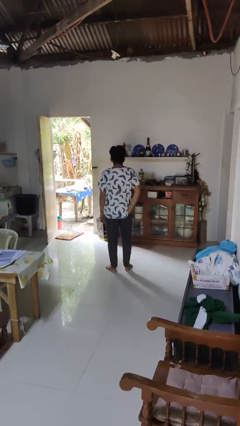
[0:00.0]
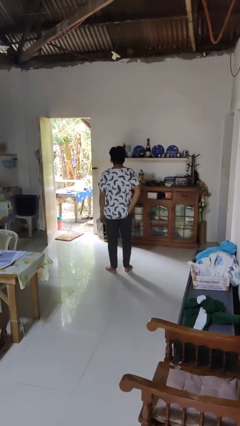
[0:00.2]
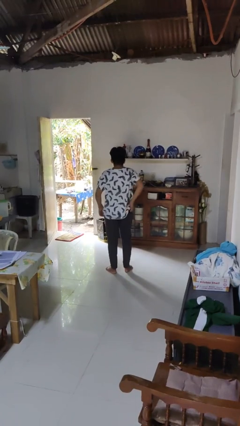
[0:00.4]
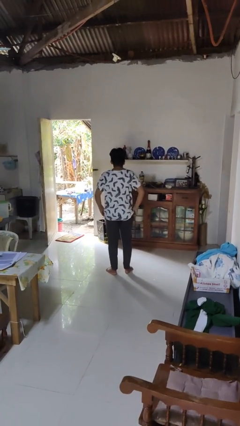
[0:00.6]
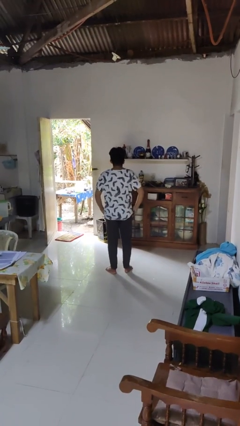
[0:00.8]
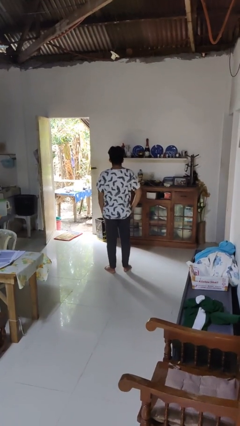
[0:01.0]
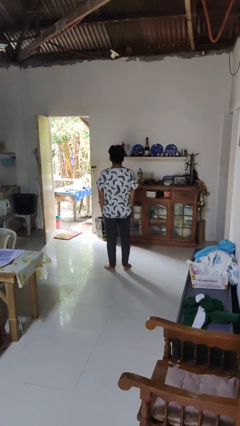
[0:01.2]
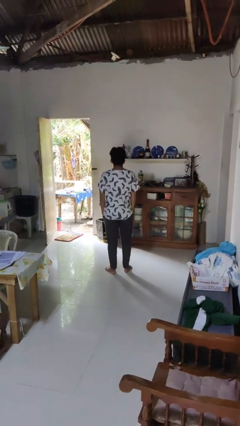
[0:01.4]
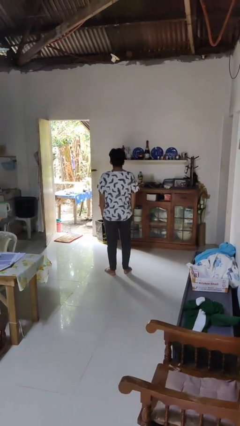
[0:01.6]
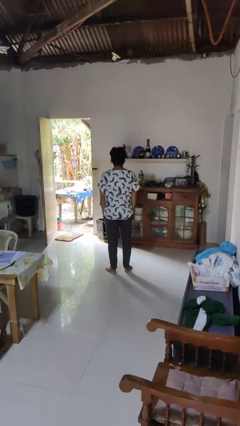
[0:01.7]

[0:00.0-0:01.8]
person puts hands in back pockets

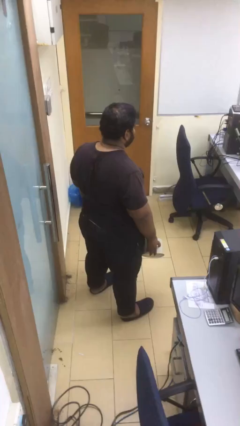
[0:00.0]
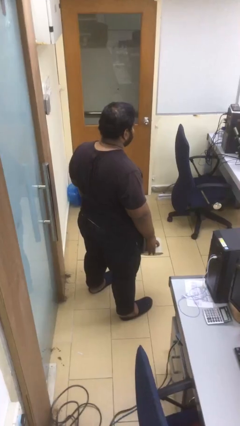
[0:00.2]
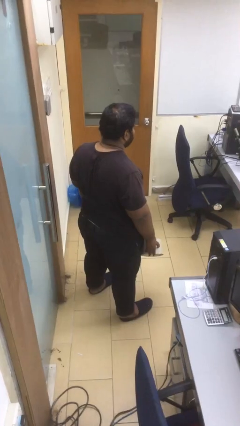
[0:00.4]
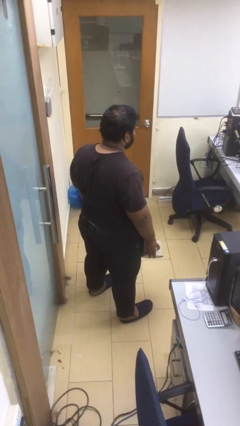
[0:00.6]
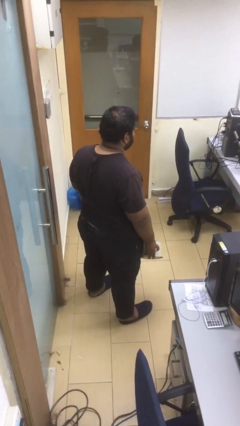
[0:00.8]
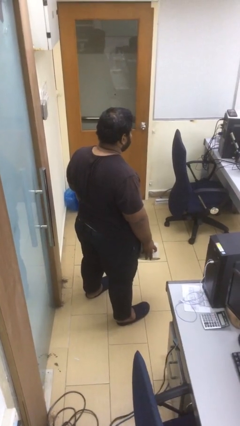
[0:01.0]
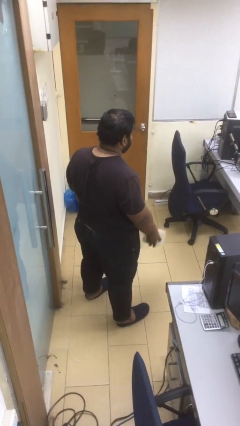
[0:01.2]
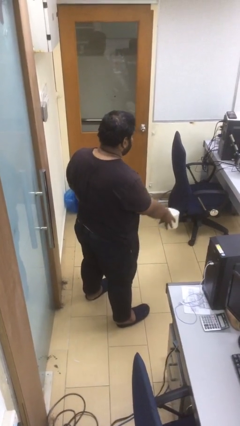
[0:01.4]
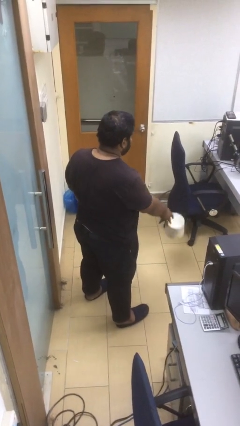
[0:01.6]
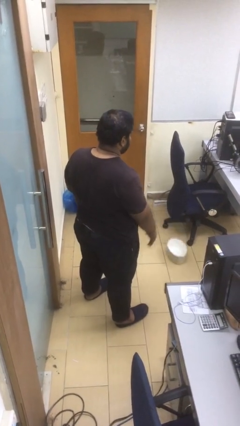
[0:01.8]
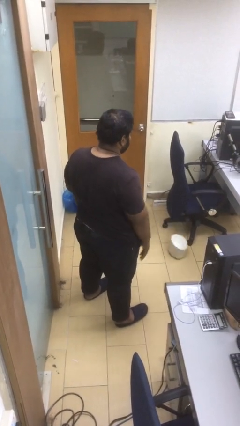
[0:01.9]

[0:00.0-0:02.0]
person throws object to ground

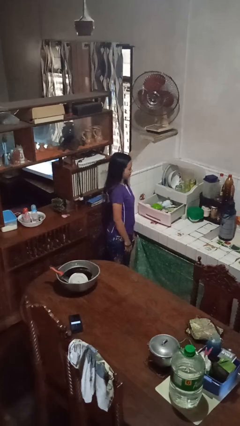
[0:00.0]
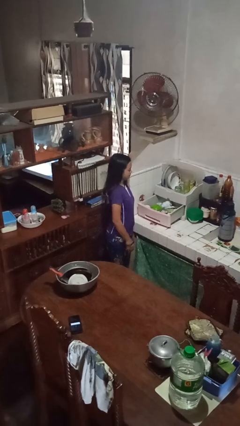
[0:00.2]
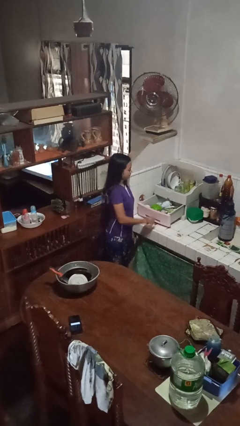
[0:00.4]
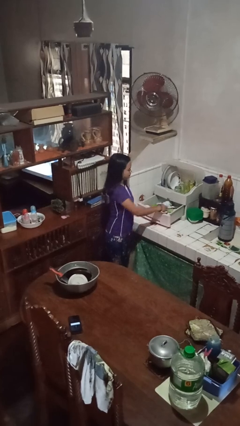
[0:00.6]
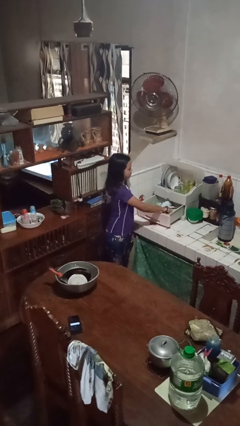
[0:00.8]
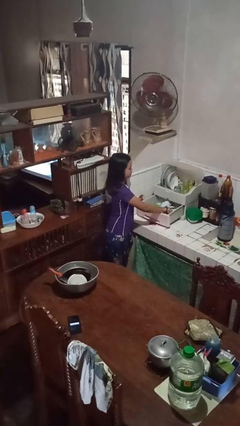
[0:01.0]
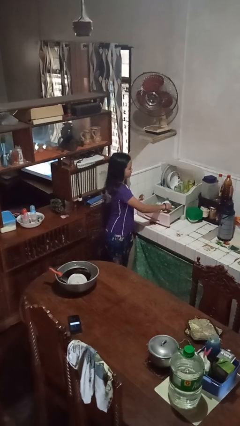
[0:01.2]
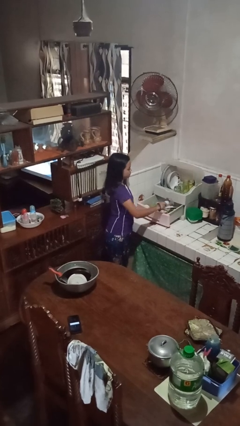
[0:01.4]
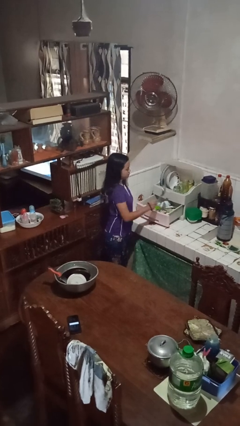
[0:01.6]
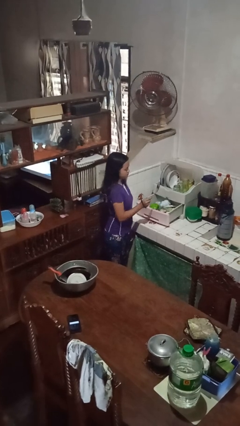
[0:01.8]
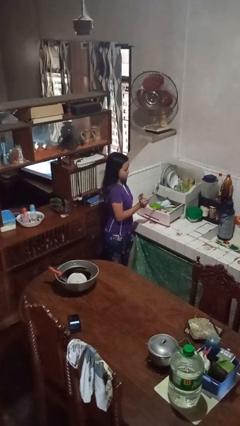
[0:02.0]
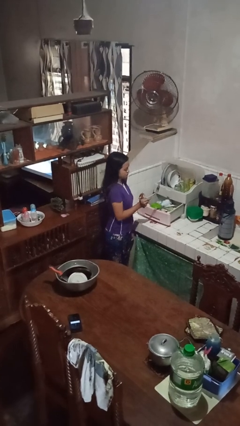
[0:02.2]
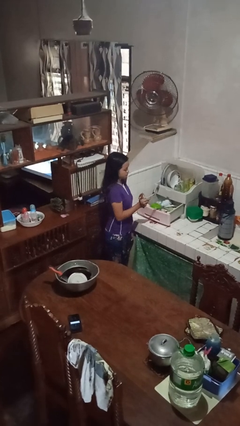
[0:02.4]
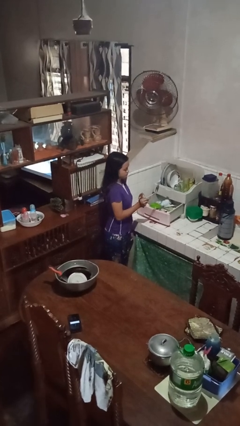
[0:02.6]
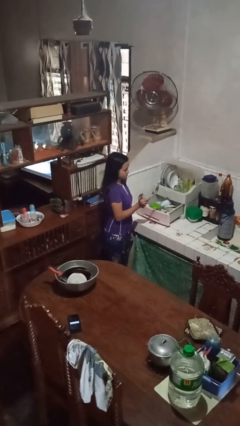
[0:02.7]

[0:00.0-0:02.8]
person takes object from kitchen drawer

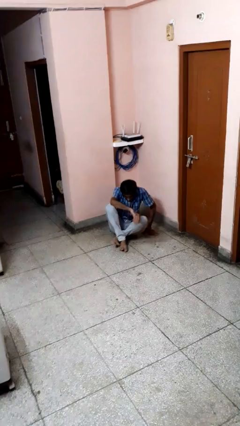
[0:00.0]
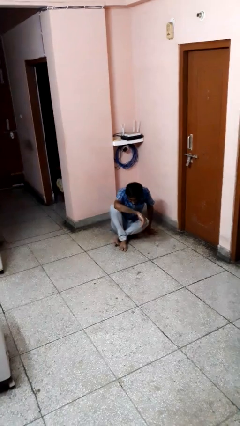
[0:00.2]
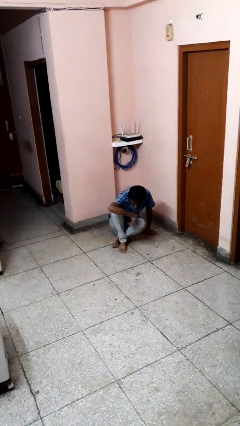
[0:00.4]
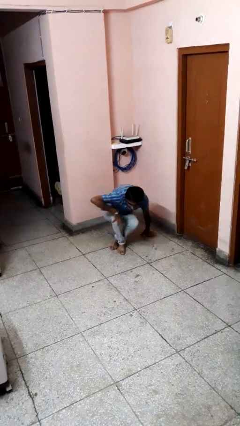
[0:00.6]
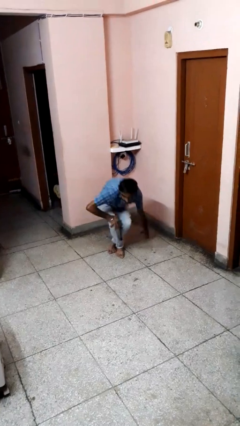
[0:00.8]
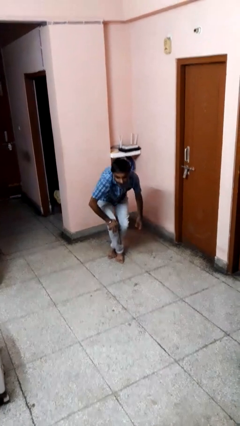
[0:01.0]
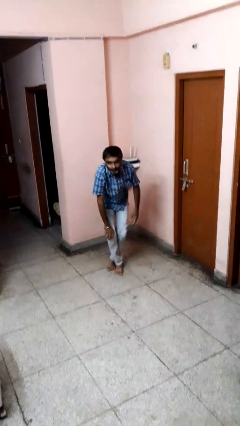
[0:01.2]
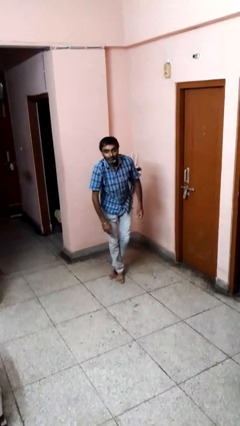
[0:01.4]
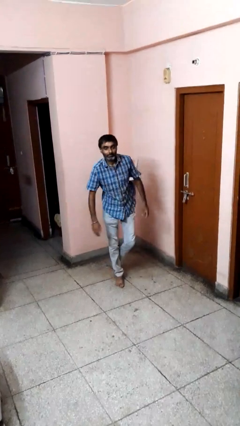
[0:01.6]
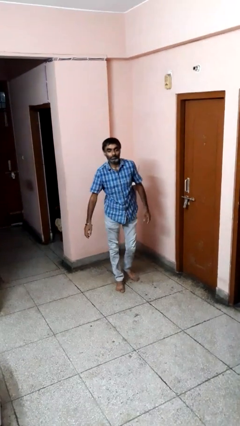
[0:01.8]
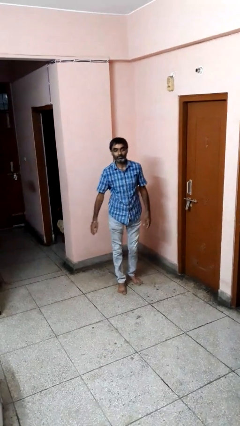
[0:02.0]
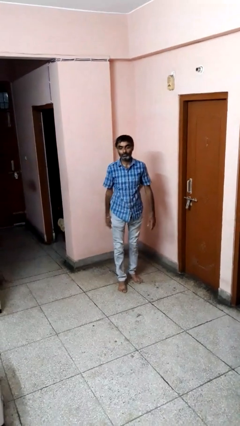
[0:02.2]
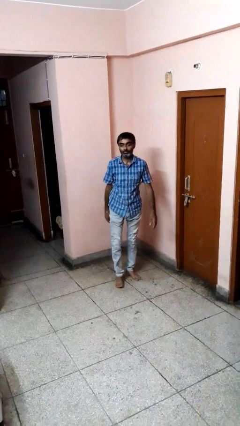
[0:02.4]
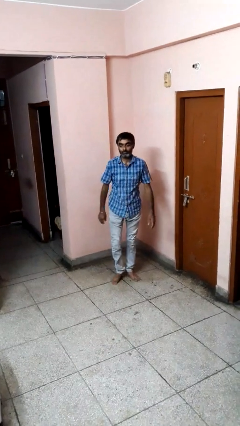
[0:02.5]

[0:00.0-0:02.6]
person stands up from floor

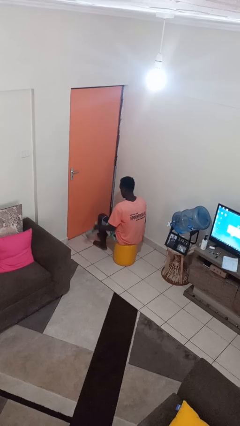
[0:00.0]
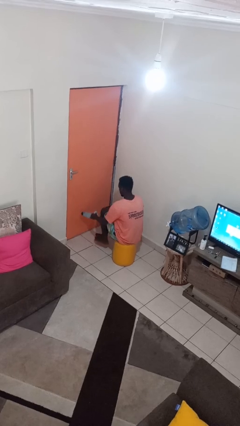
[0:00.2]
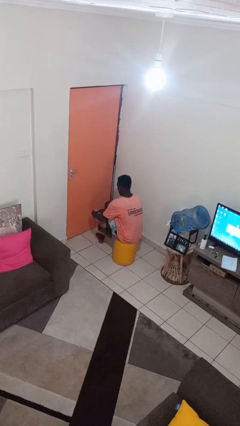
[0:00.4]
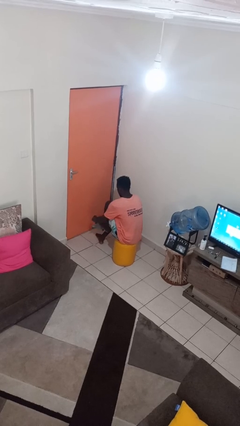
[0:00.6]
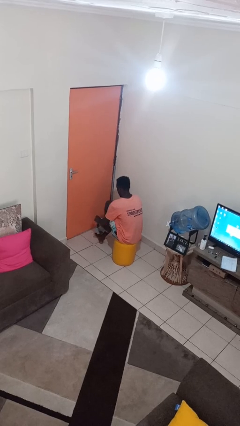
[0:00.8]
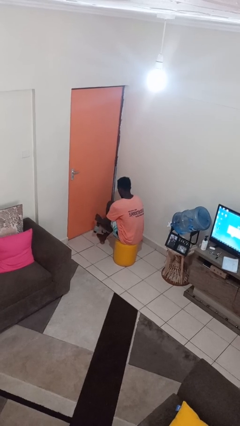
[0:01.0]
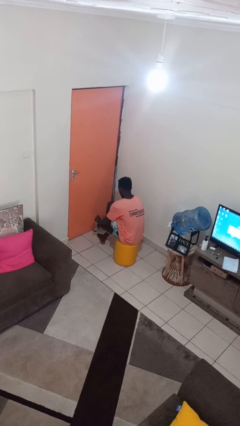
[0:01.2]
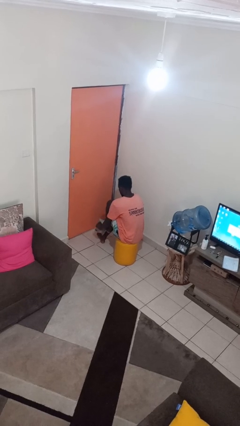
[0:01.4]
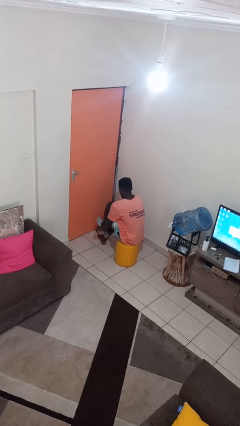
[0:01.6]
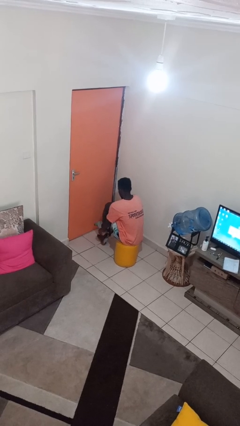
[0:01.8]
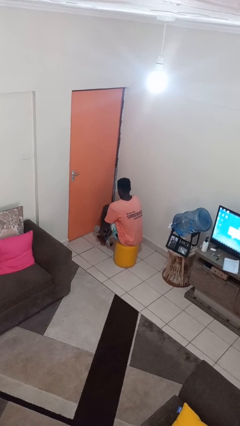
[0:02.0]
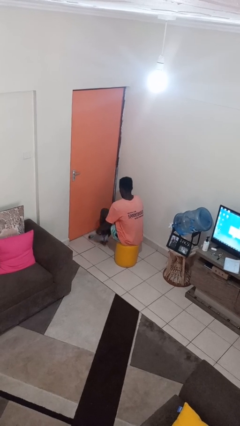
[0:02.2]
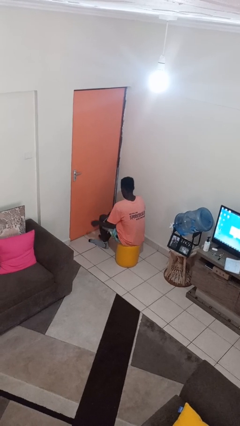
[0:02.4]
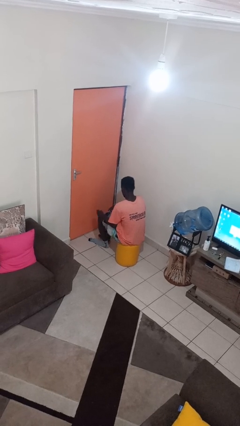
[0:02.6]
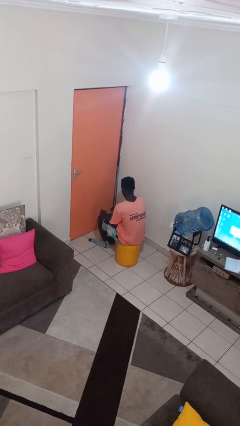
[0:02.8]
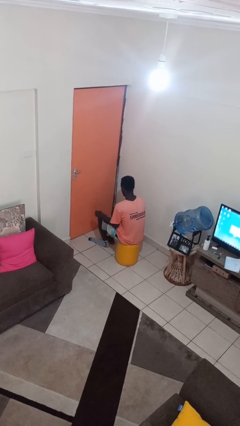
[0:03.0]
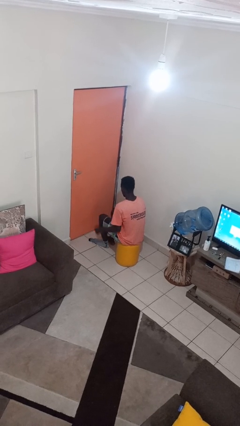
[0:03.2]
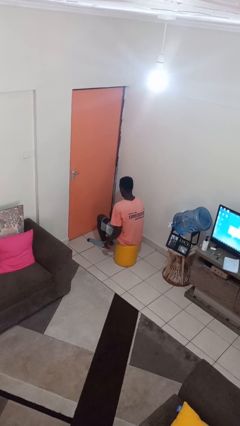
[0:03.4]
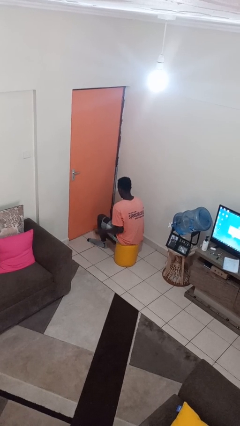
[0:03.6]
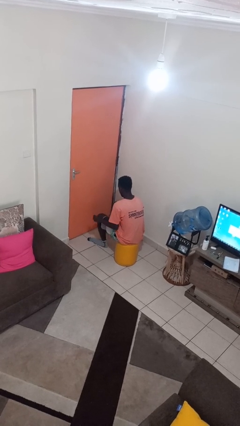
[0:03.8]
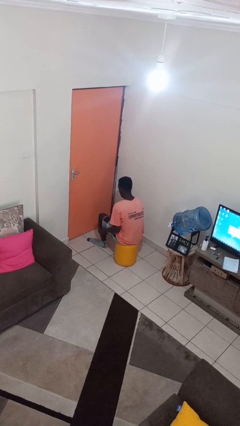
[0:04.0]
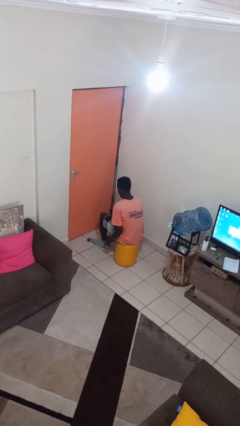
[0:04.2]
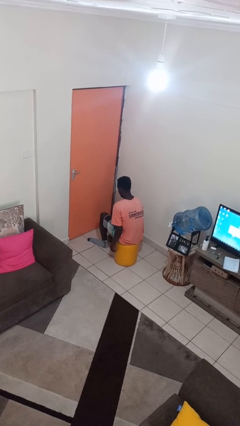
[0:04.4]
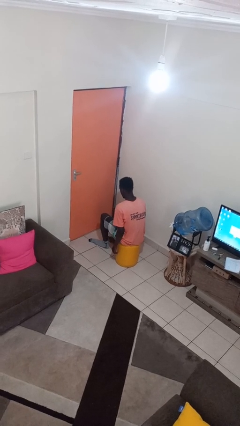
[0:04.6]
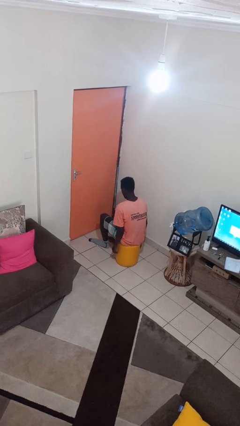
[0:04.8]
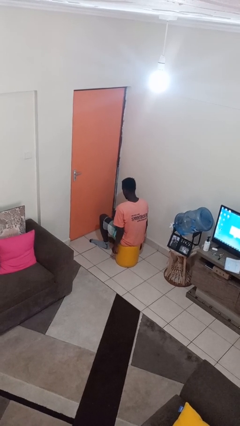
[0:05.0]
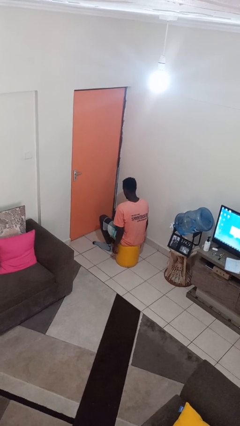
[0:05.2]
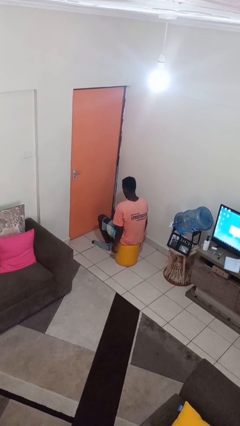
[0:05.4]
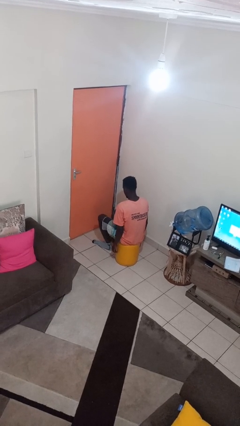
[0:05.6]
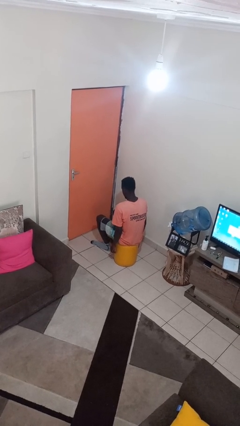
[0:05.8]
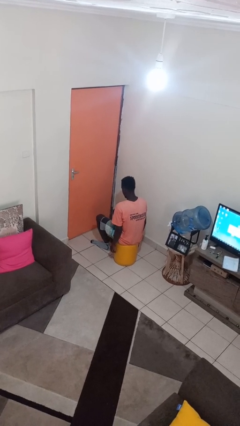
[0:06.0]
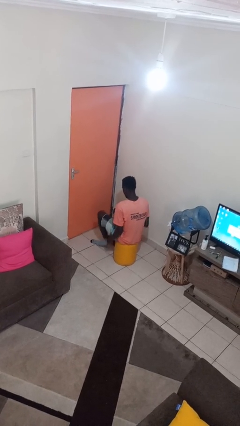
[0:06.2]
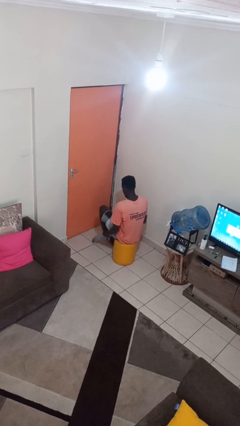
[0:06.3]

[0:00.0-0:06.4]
person puts on socks

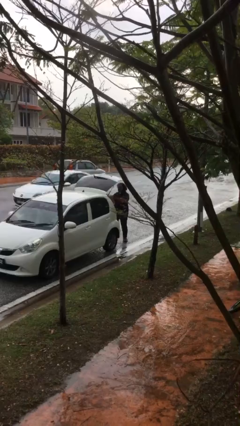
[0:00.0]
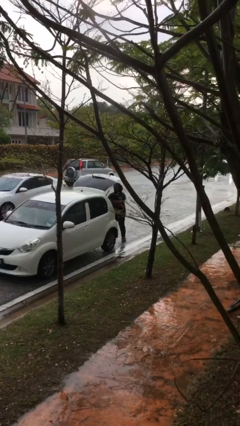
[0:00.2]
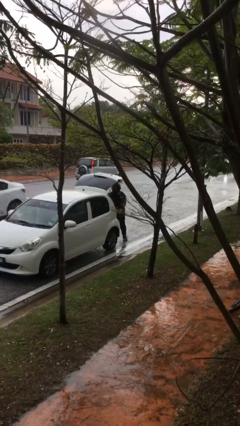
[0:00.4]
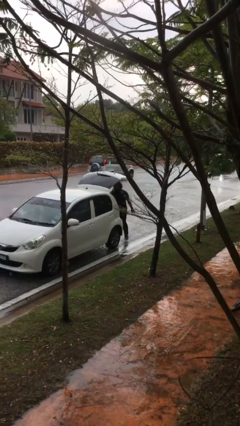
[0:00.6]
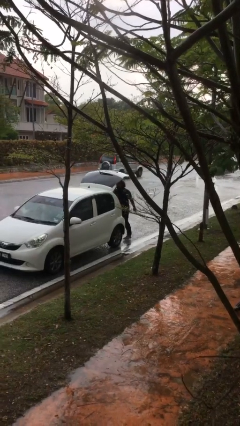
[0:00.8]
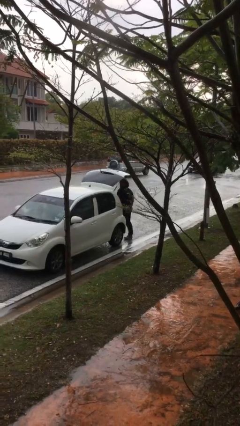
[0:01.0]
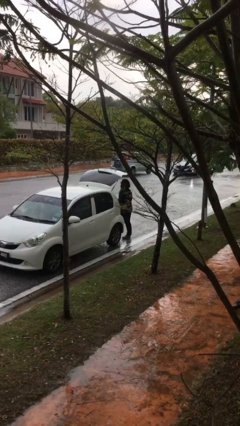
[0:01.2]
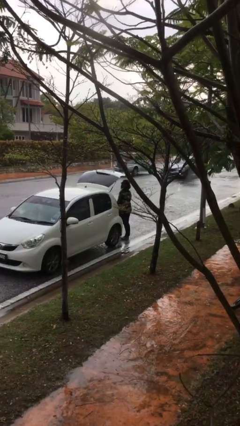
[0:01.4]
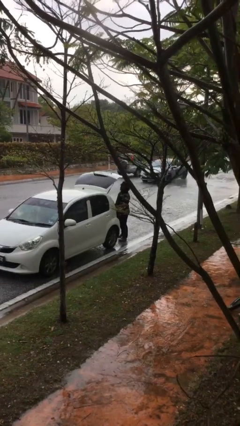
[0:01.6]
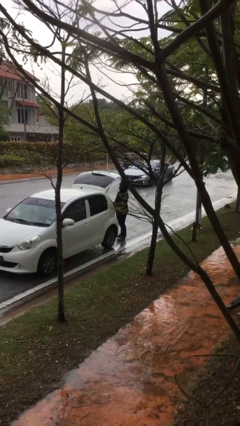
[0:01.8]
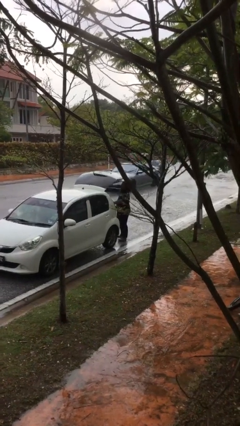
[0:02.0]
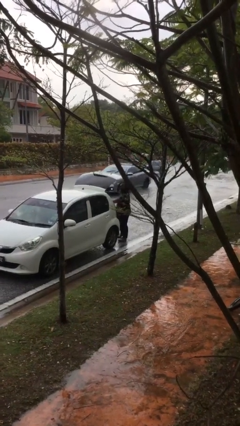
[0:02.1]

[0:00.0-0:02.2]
person loads car
